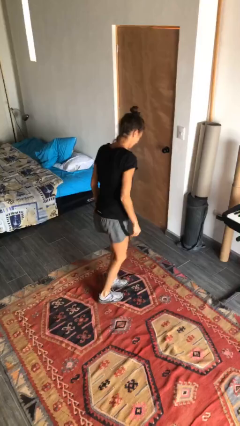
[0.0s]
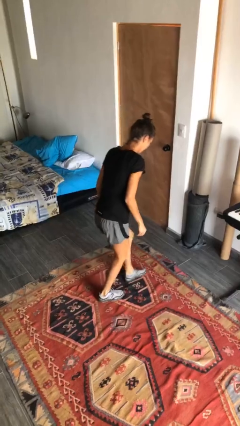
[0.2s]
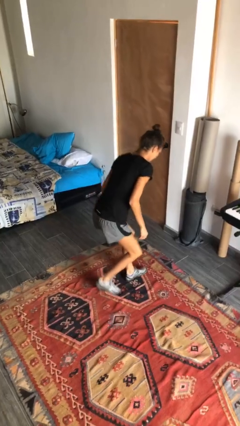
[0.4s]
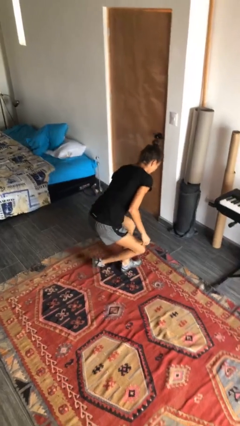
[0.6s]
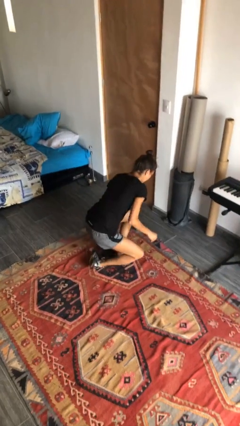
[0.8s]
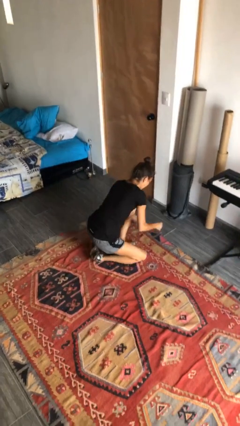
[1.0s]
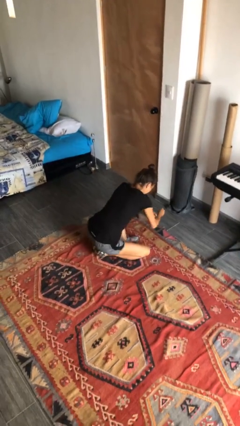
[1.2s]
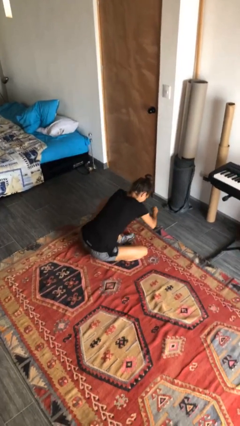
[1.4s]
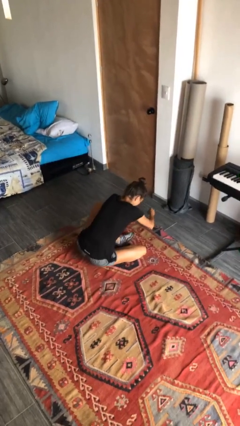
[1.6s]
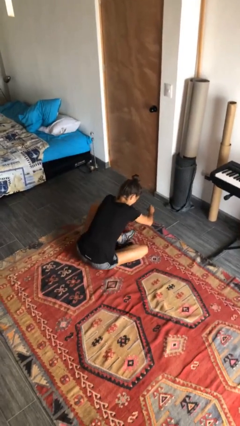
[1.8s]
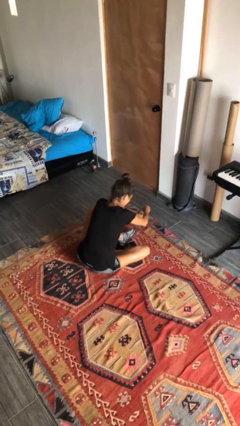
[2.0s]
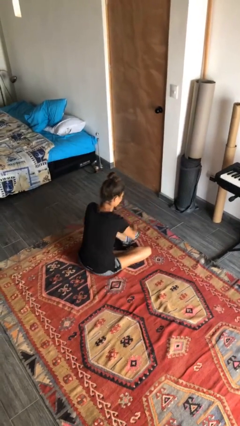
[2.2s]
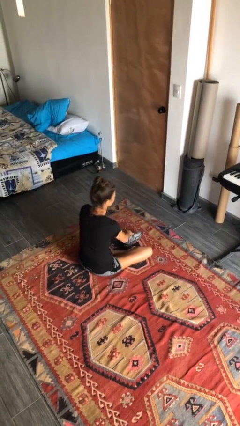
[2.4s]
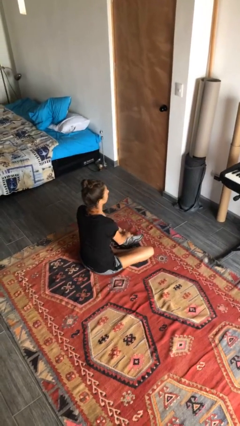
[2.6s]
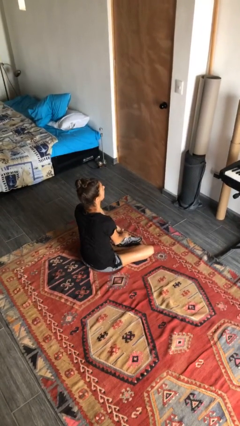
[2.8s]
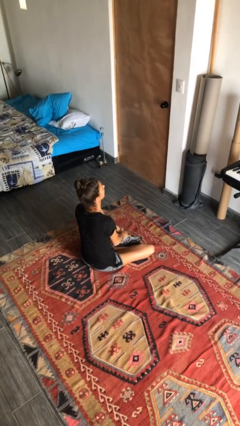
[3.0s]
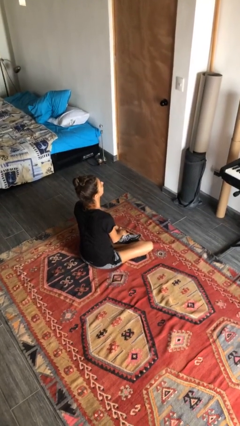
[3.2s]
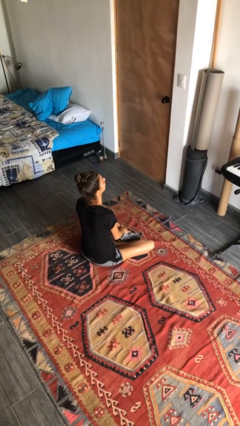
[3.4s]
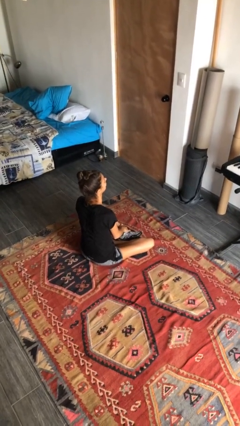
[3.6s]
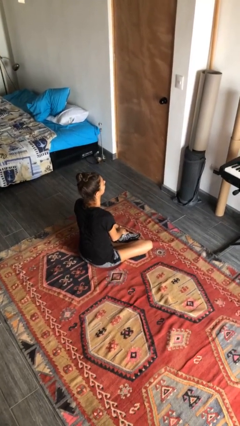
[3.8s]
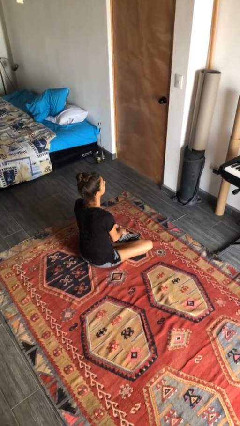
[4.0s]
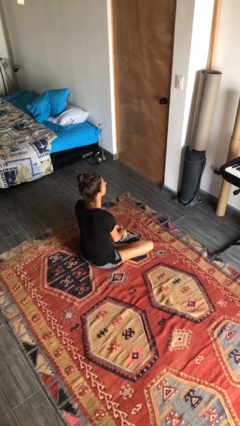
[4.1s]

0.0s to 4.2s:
person sits crisscross

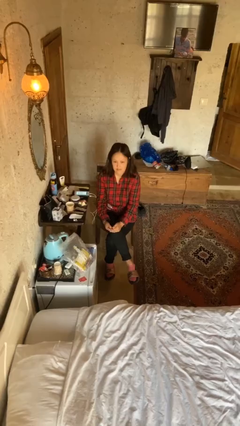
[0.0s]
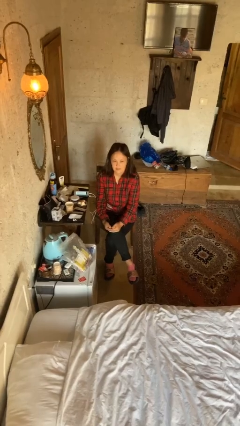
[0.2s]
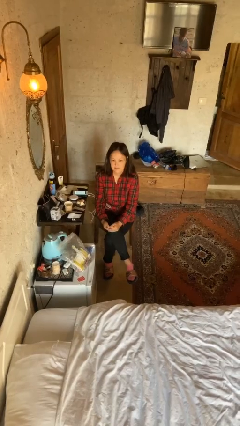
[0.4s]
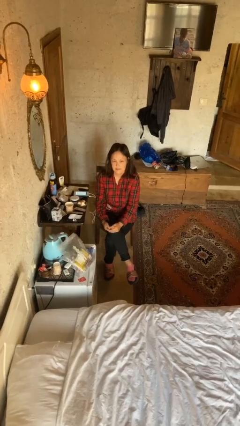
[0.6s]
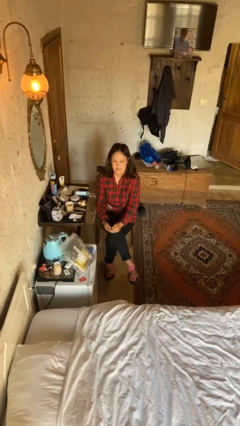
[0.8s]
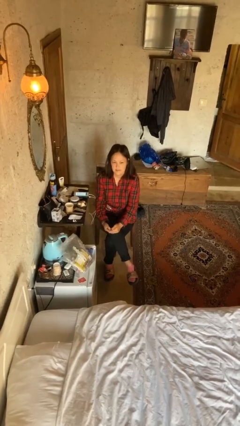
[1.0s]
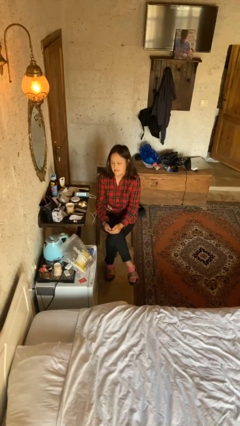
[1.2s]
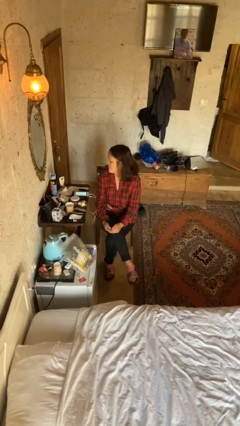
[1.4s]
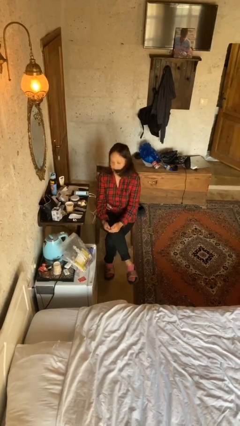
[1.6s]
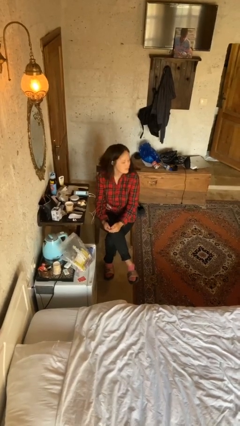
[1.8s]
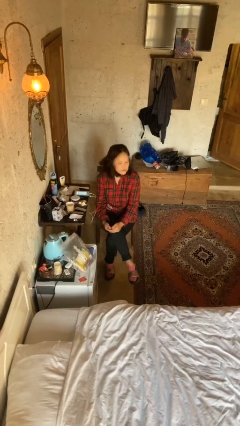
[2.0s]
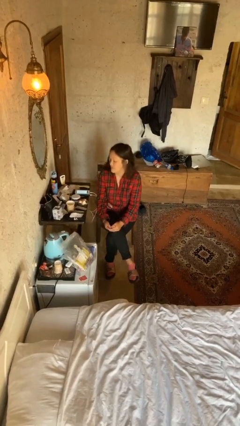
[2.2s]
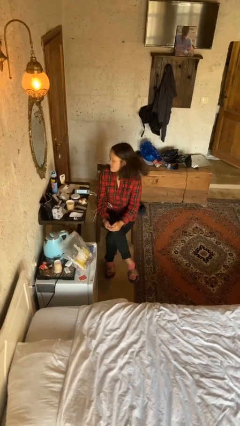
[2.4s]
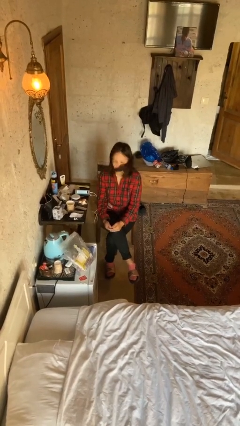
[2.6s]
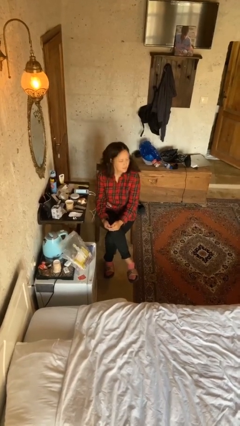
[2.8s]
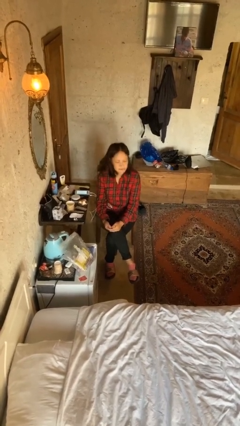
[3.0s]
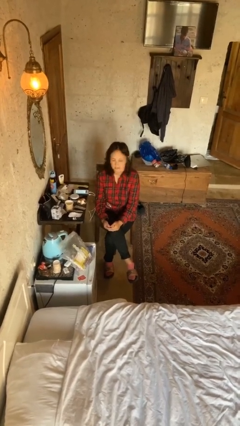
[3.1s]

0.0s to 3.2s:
person shakes head

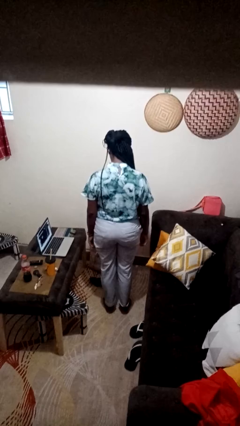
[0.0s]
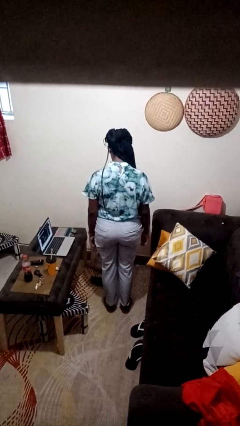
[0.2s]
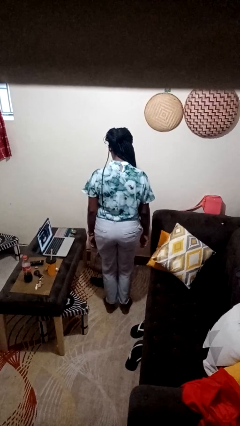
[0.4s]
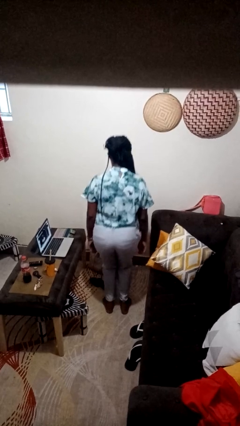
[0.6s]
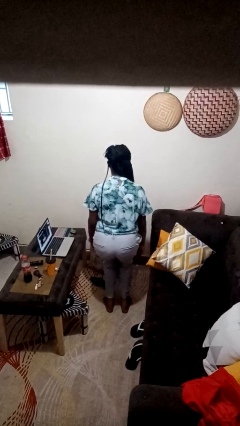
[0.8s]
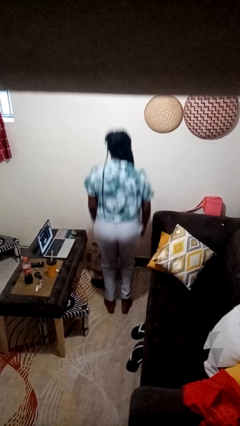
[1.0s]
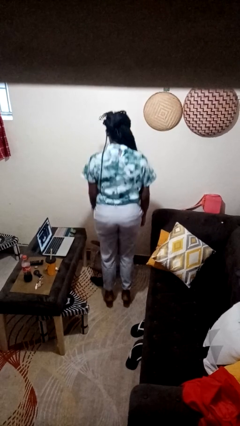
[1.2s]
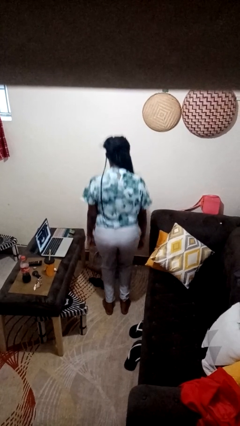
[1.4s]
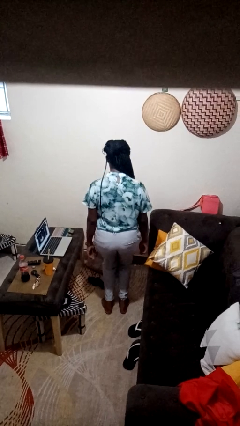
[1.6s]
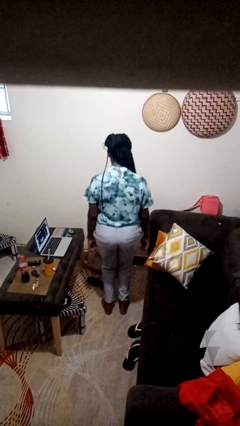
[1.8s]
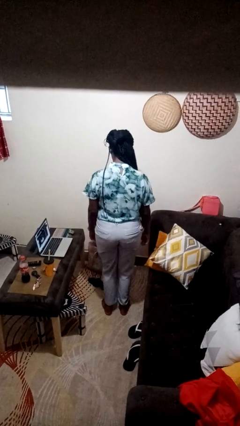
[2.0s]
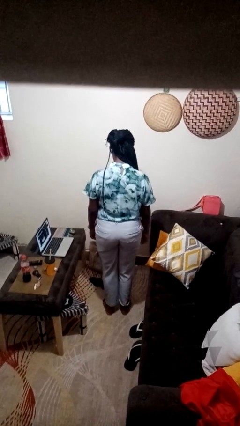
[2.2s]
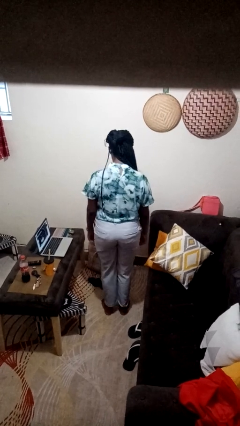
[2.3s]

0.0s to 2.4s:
person jumps

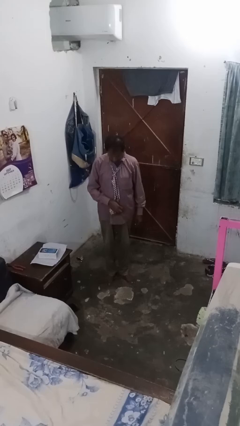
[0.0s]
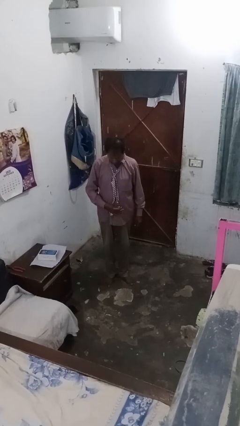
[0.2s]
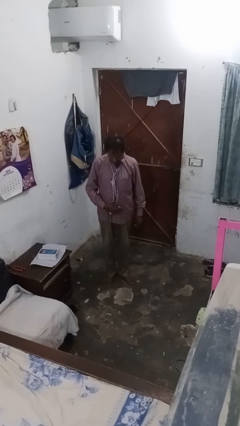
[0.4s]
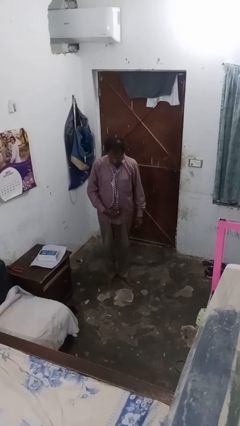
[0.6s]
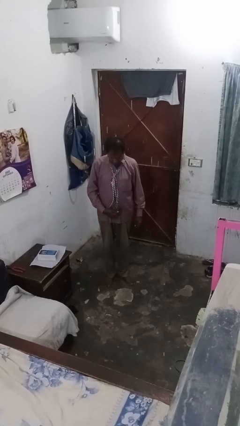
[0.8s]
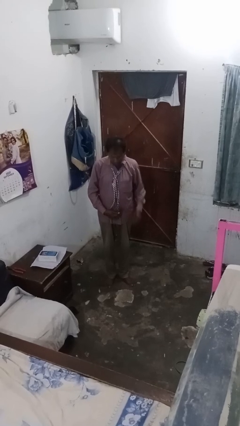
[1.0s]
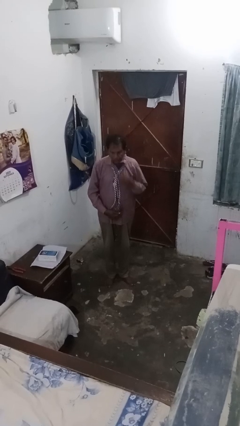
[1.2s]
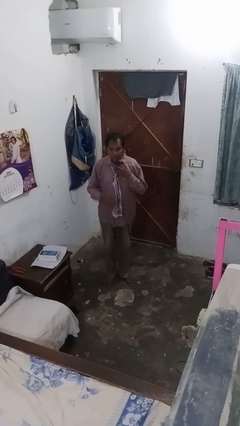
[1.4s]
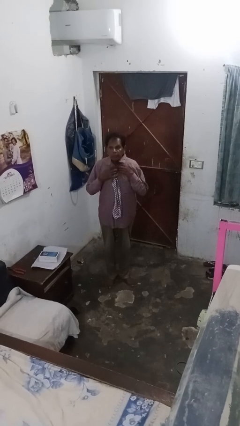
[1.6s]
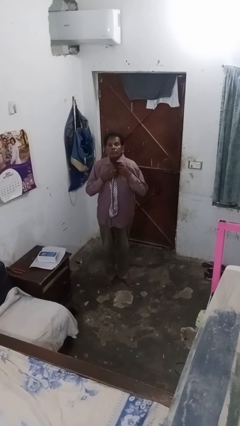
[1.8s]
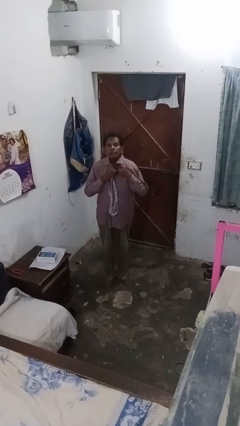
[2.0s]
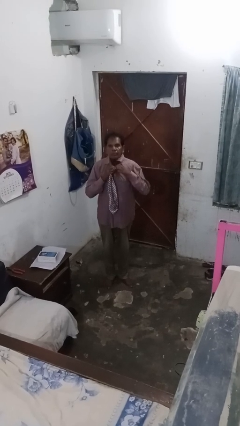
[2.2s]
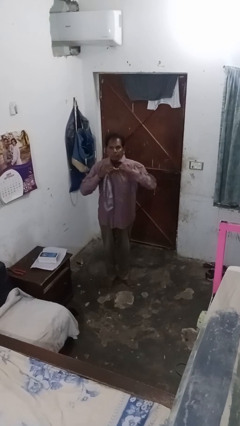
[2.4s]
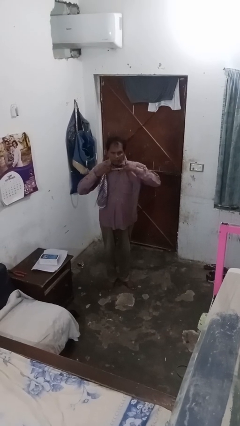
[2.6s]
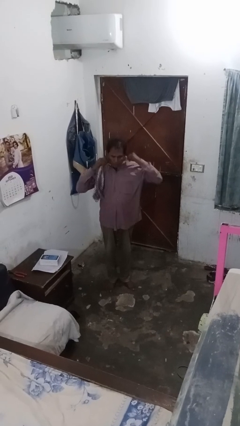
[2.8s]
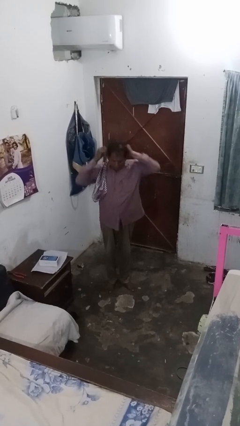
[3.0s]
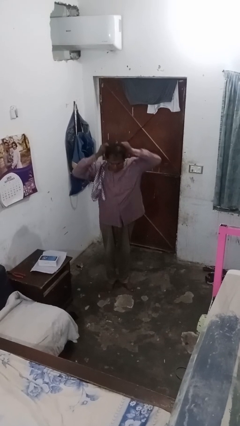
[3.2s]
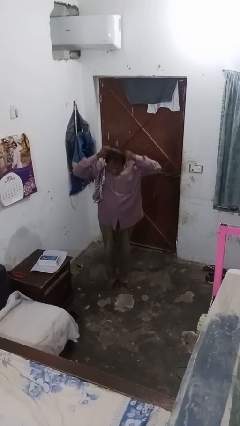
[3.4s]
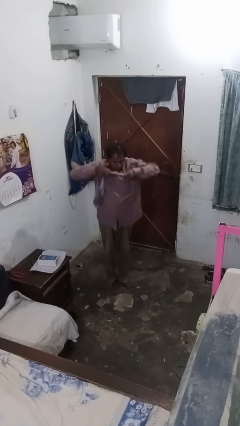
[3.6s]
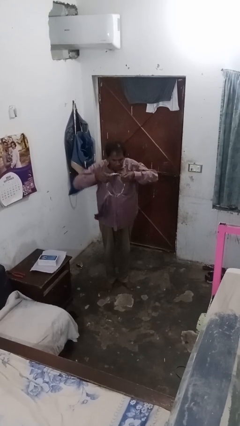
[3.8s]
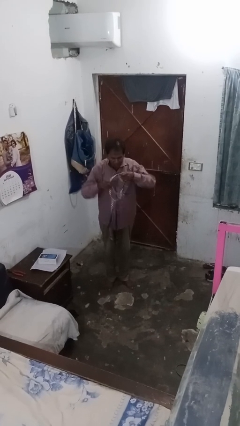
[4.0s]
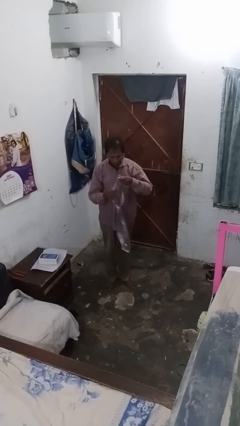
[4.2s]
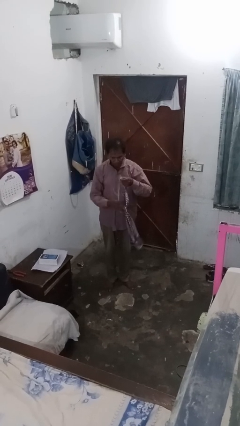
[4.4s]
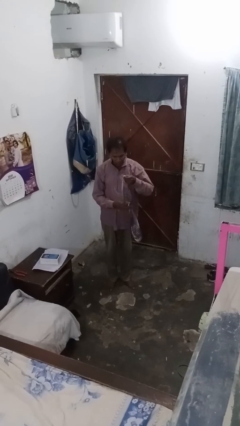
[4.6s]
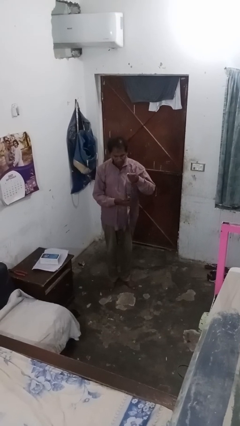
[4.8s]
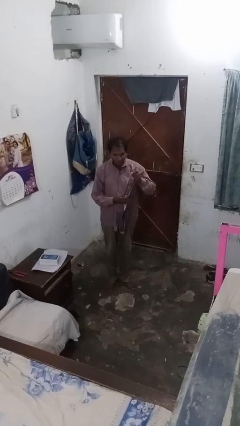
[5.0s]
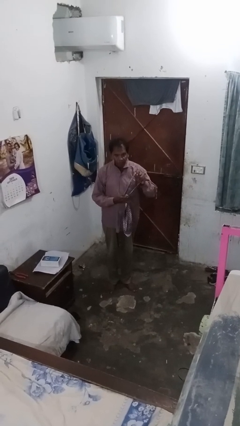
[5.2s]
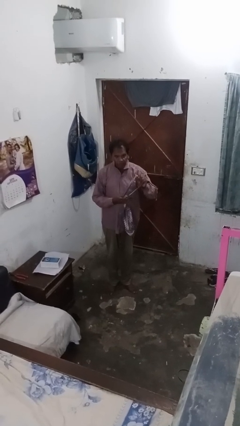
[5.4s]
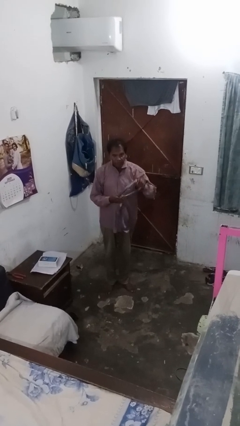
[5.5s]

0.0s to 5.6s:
person takes off necktie

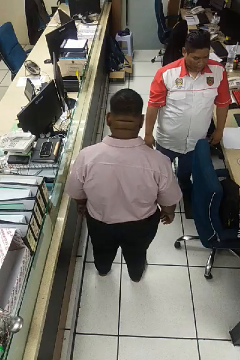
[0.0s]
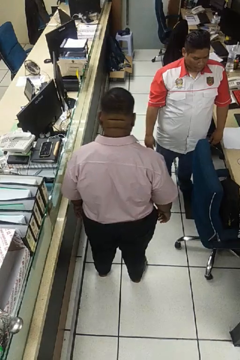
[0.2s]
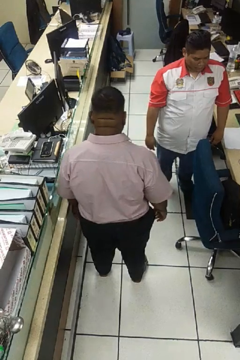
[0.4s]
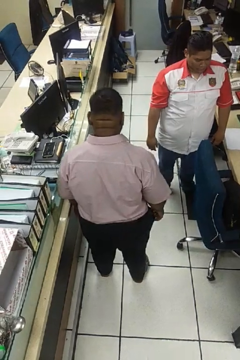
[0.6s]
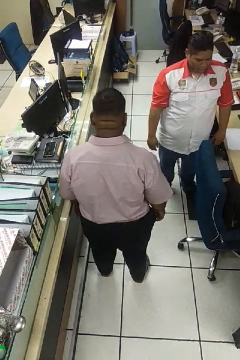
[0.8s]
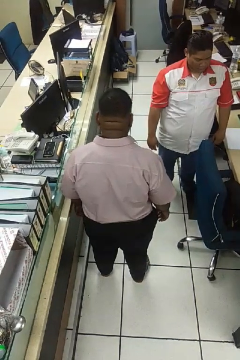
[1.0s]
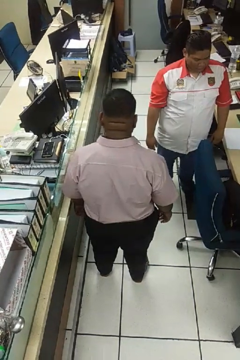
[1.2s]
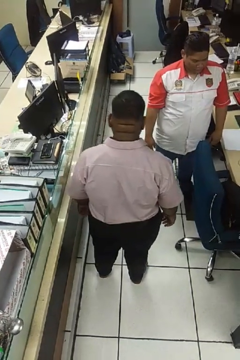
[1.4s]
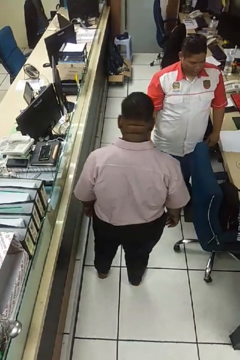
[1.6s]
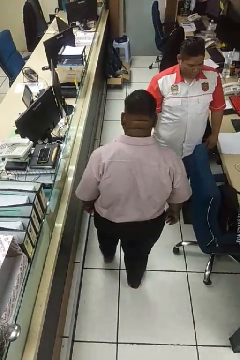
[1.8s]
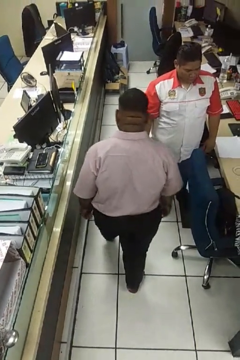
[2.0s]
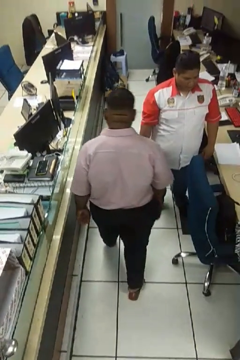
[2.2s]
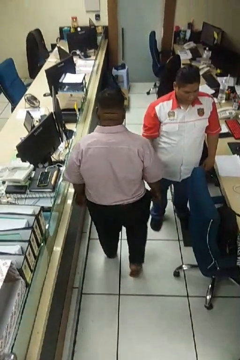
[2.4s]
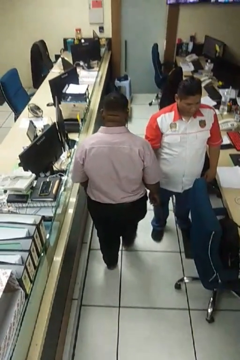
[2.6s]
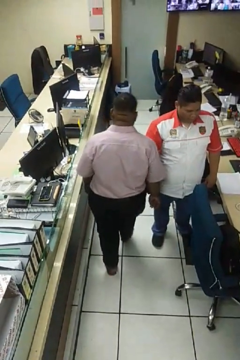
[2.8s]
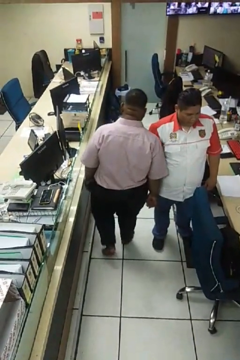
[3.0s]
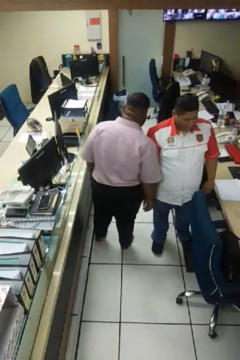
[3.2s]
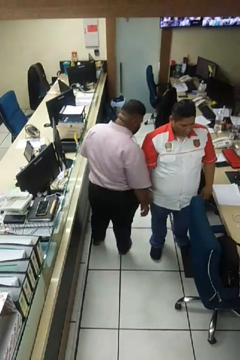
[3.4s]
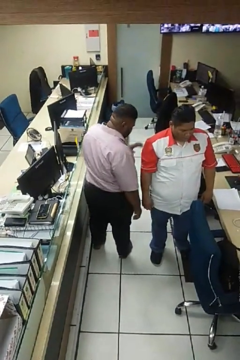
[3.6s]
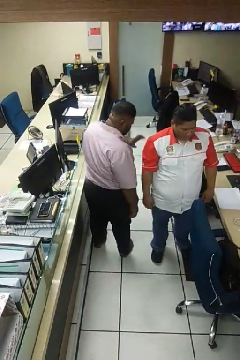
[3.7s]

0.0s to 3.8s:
person bumps into person
